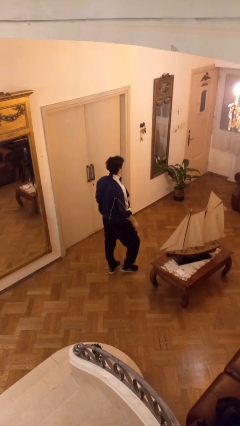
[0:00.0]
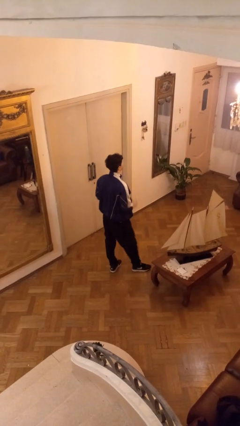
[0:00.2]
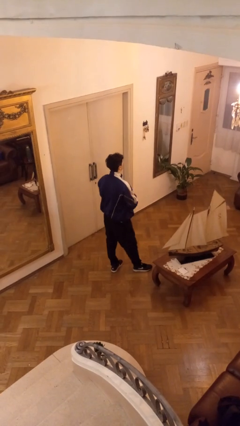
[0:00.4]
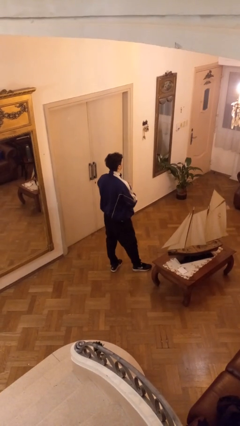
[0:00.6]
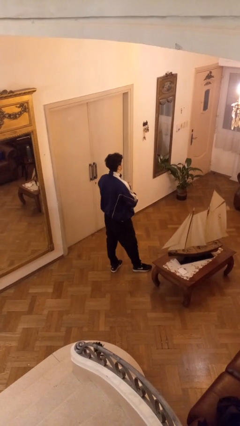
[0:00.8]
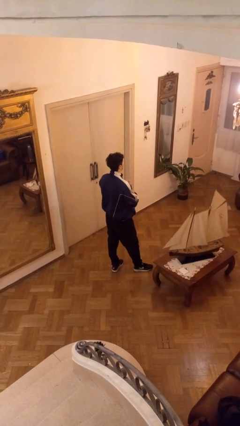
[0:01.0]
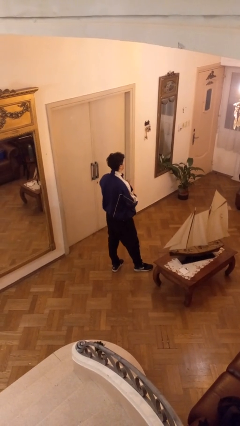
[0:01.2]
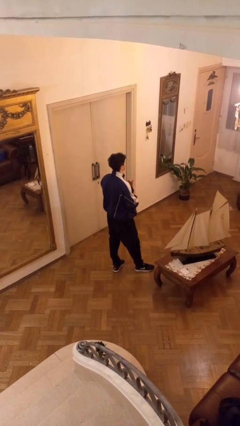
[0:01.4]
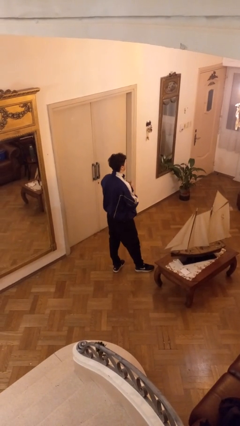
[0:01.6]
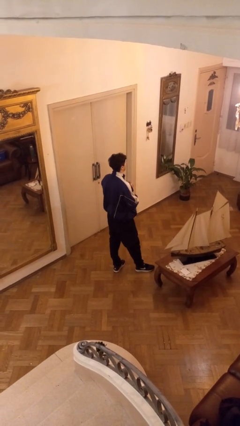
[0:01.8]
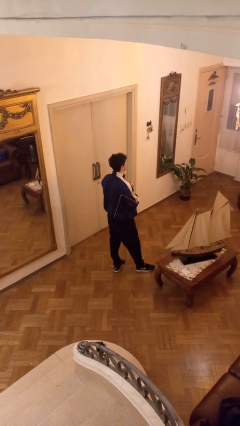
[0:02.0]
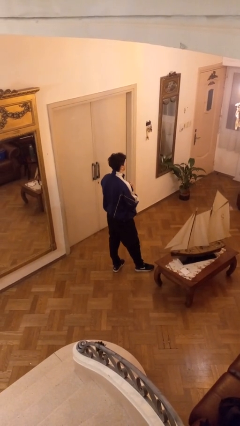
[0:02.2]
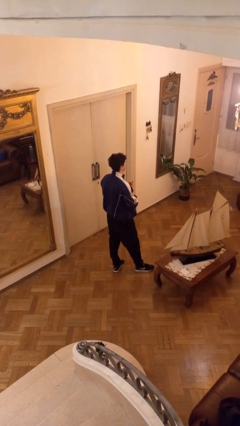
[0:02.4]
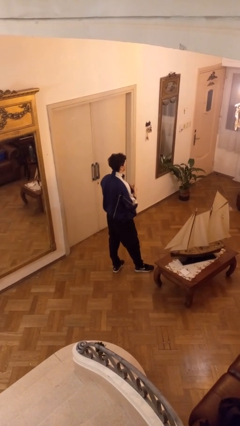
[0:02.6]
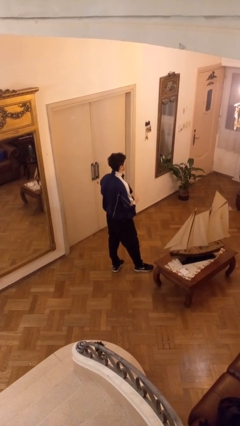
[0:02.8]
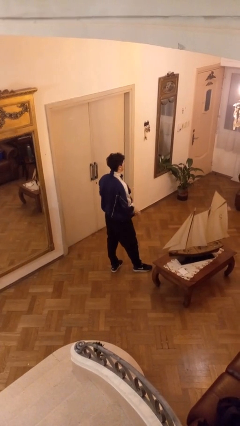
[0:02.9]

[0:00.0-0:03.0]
person cracks knuckles

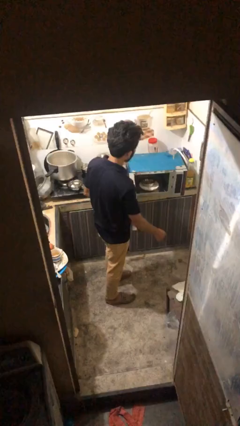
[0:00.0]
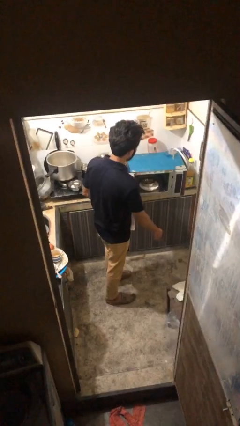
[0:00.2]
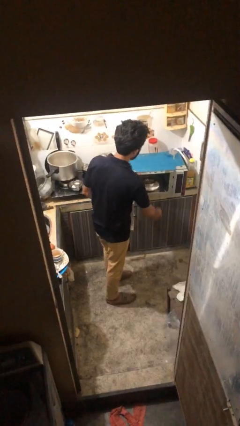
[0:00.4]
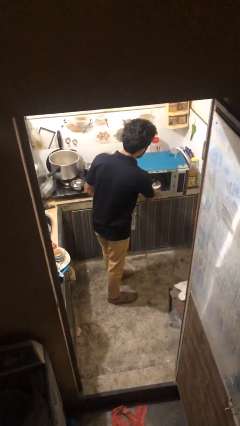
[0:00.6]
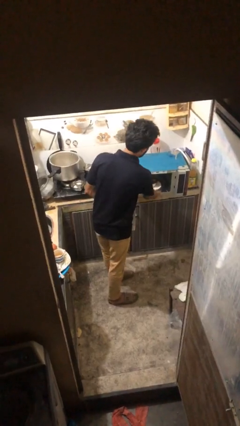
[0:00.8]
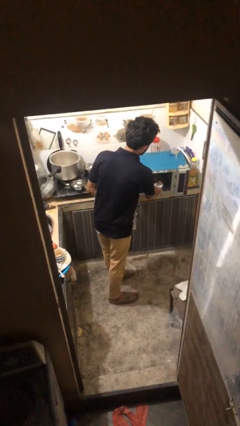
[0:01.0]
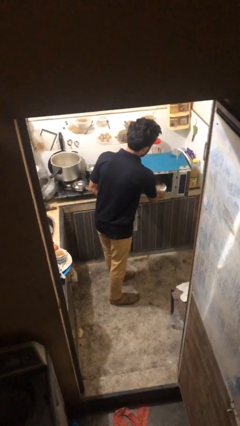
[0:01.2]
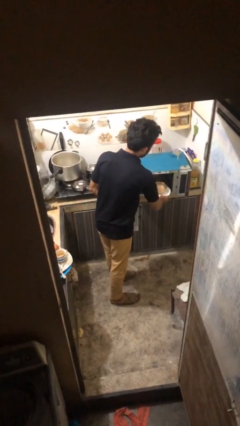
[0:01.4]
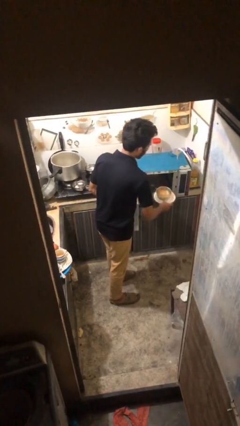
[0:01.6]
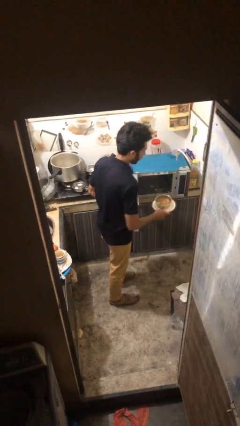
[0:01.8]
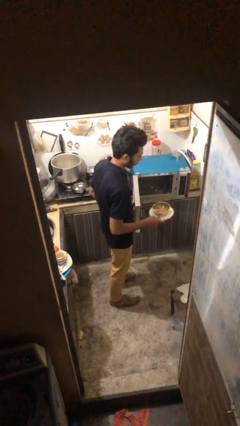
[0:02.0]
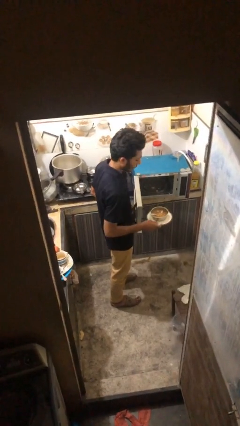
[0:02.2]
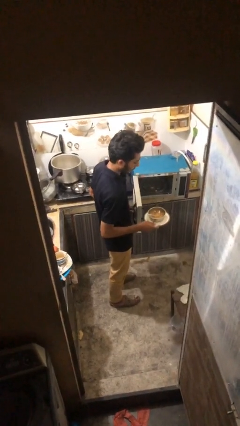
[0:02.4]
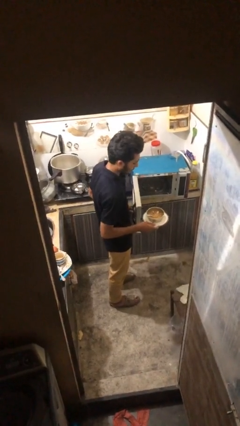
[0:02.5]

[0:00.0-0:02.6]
person takes object from microwave

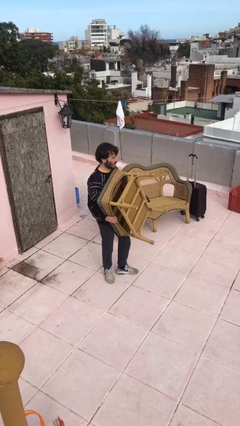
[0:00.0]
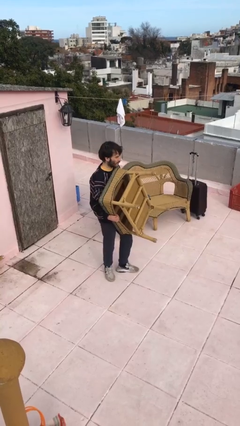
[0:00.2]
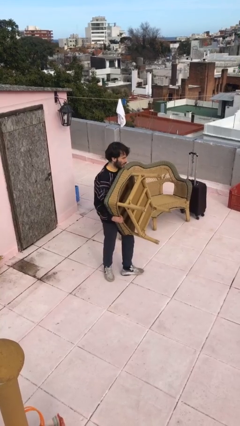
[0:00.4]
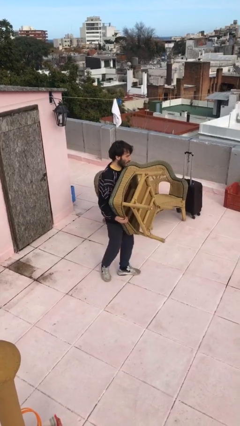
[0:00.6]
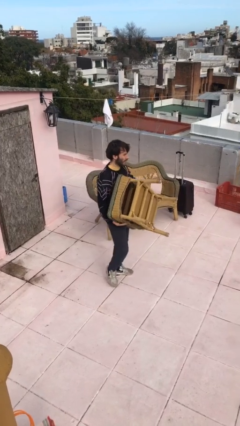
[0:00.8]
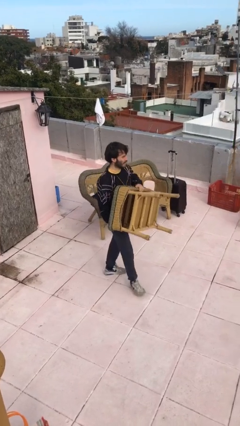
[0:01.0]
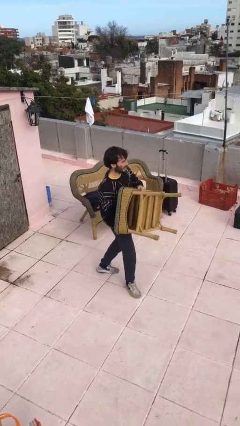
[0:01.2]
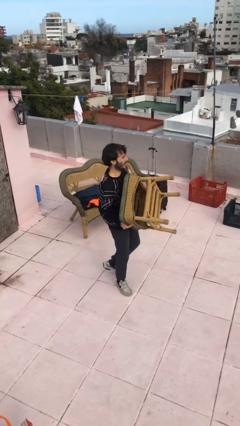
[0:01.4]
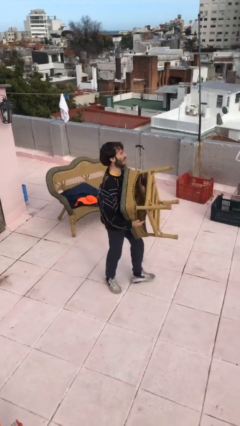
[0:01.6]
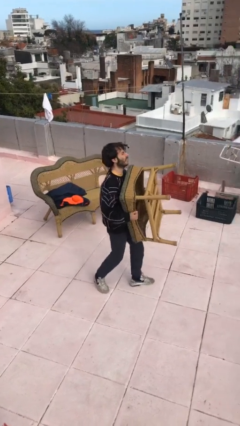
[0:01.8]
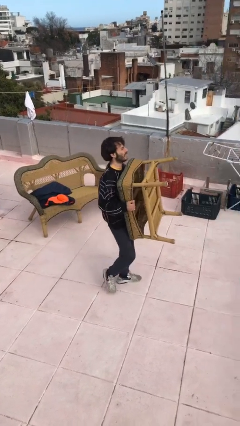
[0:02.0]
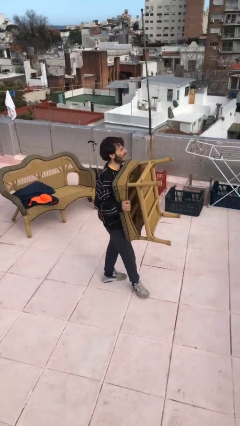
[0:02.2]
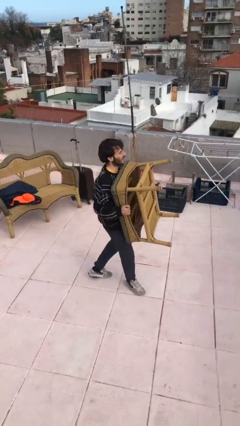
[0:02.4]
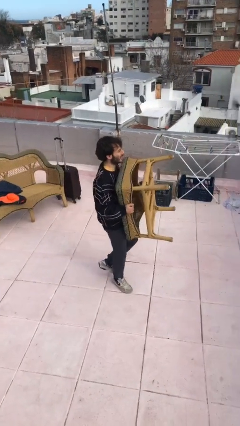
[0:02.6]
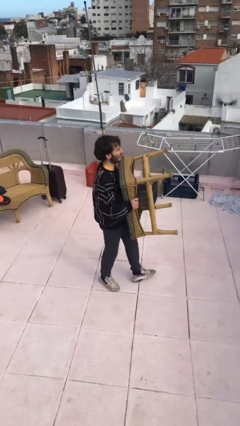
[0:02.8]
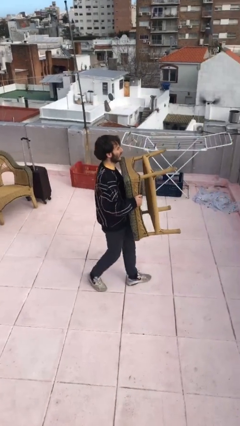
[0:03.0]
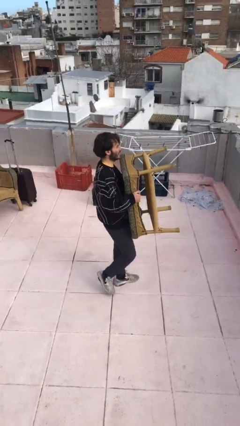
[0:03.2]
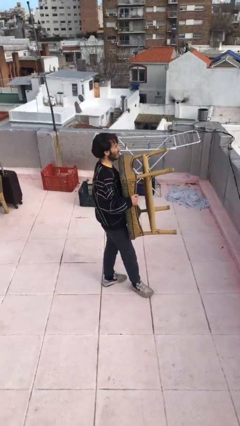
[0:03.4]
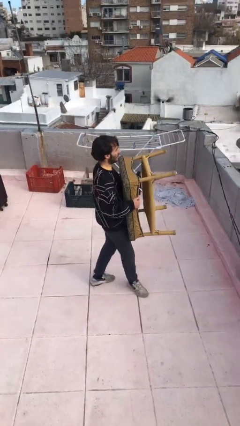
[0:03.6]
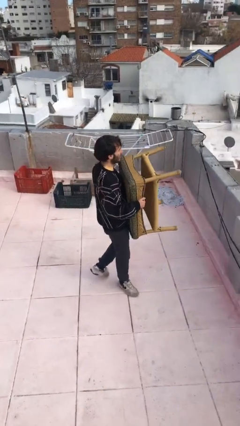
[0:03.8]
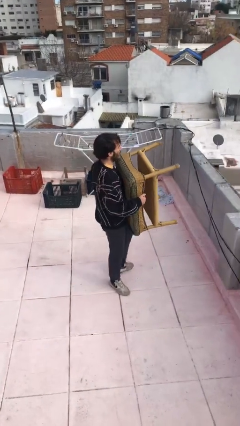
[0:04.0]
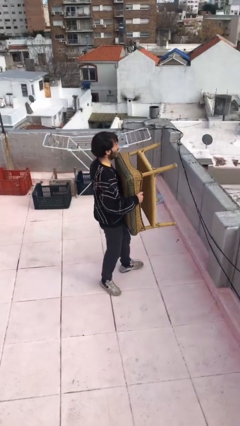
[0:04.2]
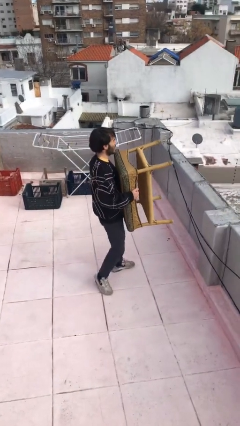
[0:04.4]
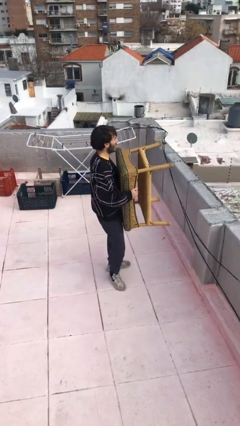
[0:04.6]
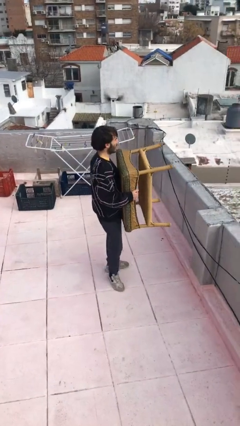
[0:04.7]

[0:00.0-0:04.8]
person carries furniture

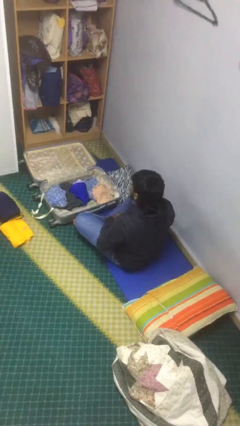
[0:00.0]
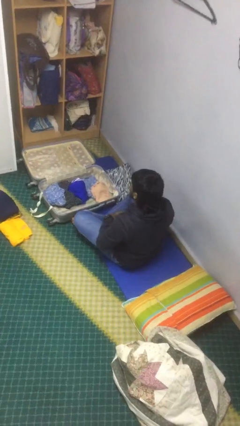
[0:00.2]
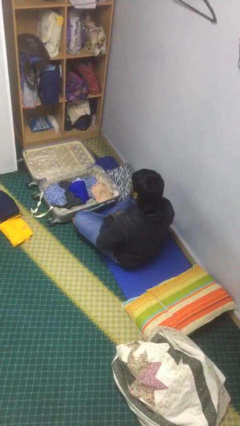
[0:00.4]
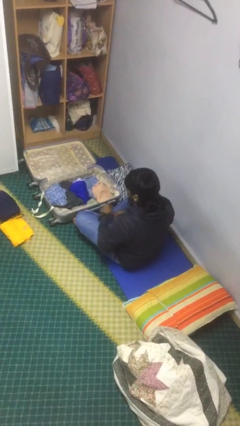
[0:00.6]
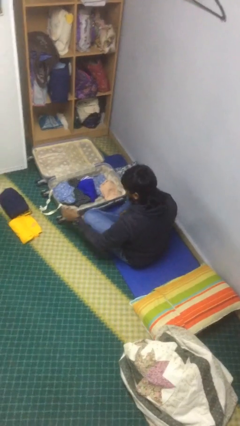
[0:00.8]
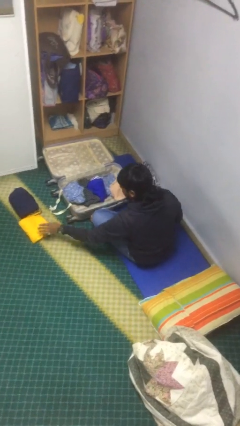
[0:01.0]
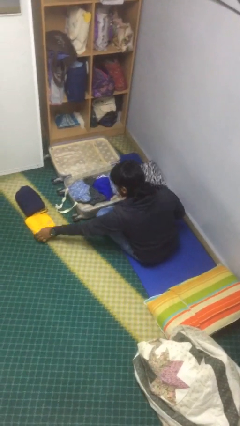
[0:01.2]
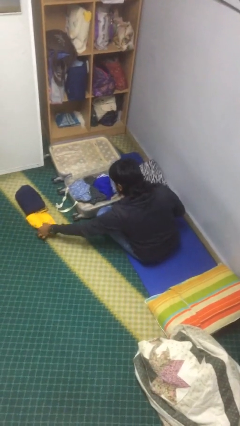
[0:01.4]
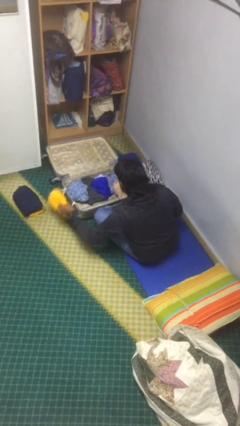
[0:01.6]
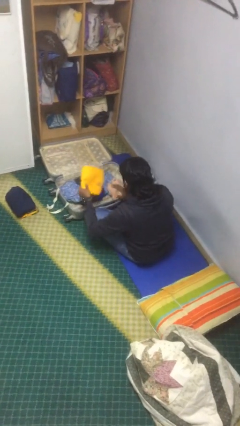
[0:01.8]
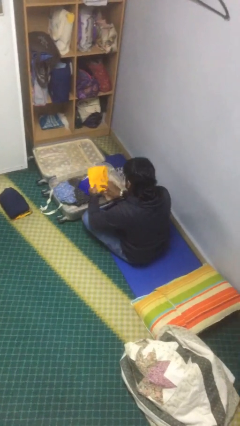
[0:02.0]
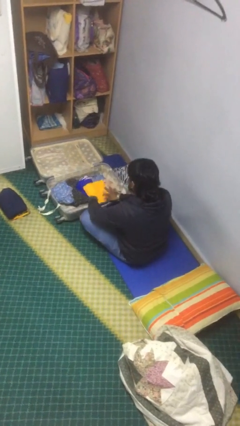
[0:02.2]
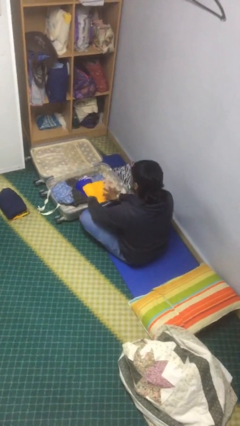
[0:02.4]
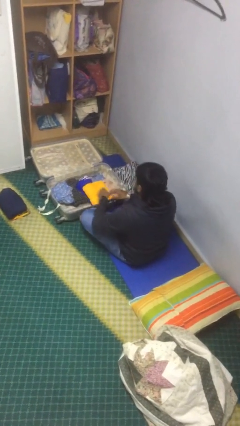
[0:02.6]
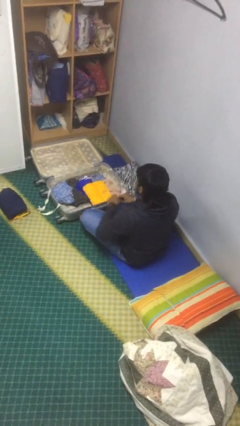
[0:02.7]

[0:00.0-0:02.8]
person loads clothes into suitcase

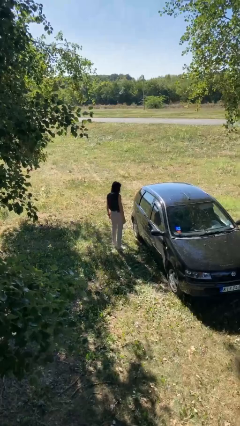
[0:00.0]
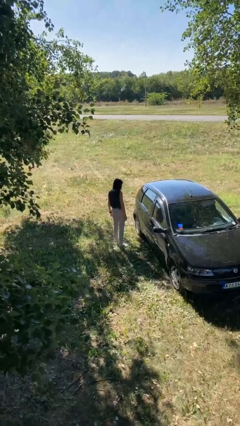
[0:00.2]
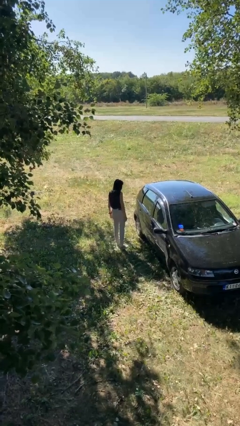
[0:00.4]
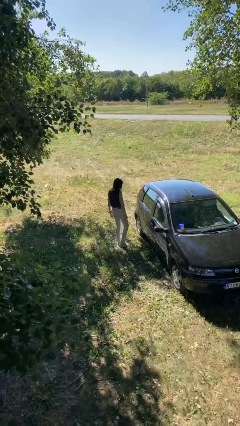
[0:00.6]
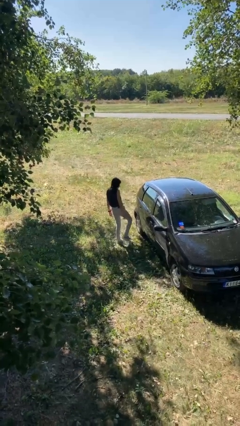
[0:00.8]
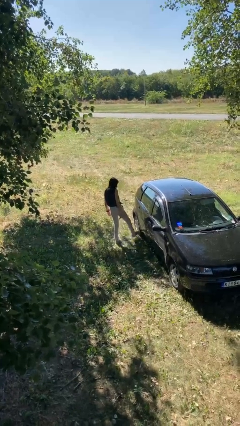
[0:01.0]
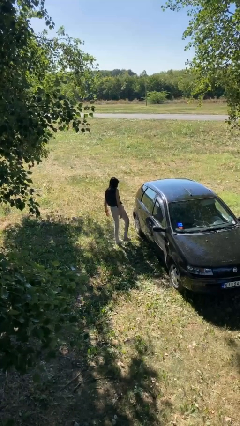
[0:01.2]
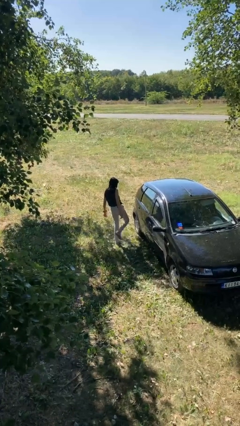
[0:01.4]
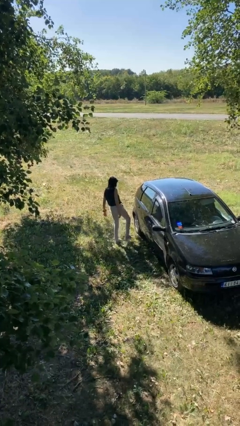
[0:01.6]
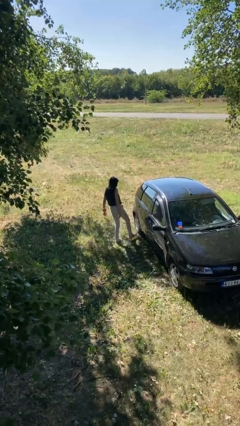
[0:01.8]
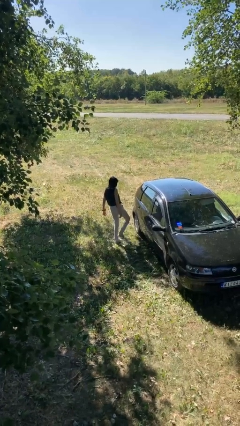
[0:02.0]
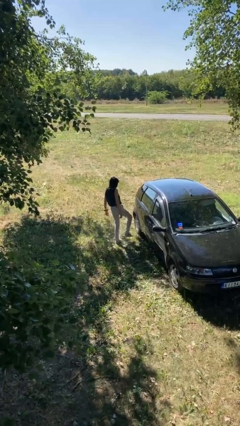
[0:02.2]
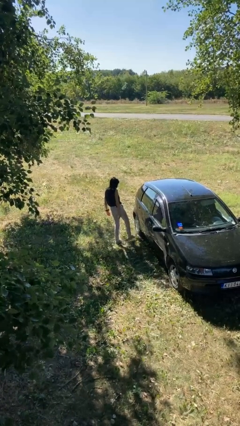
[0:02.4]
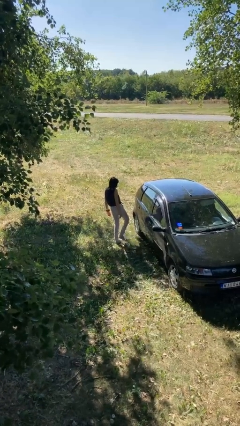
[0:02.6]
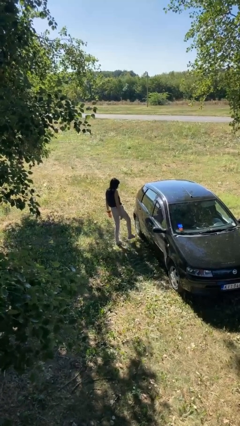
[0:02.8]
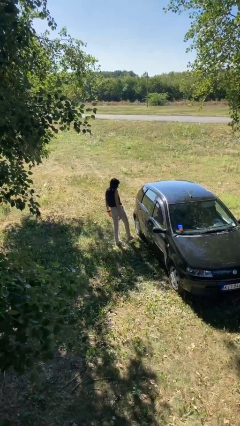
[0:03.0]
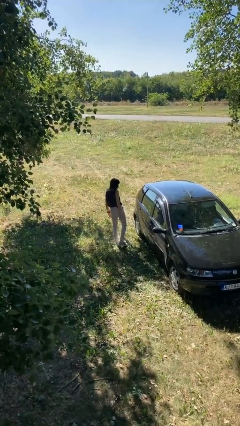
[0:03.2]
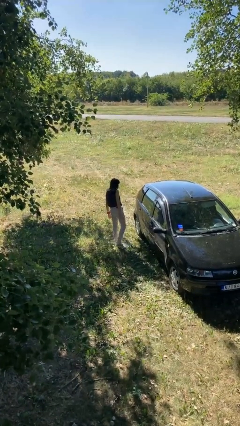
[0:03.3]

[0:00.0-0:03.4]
person kicks car tires

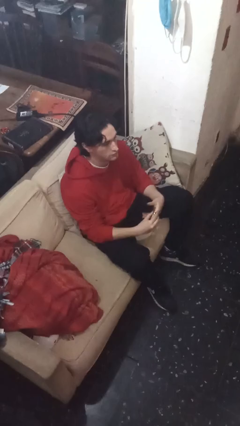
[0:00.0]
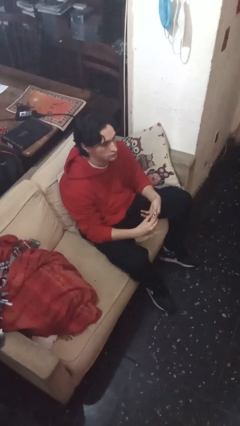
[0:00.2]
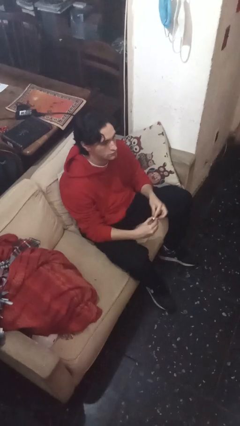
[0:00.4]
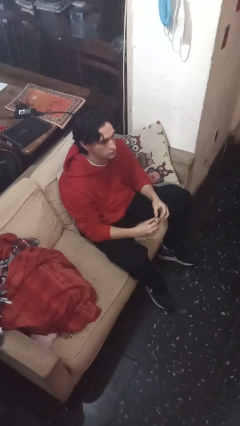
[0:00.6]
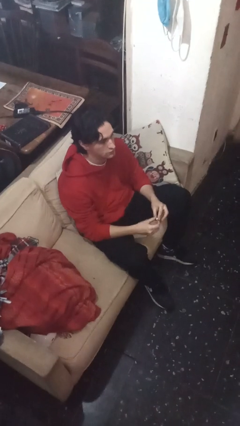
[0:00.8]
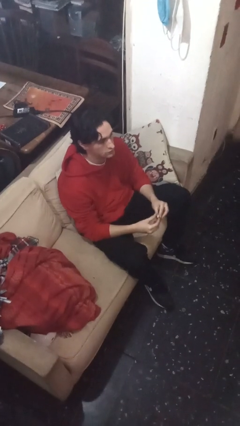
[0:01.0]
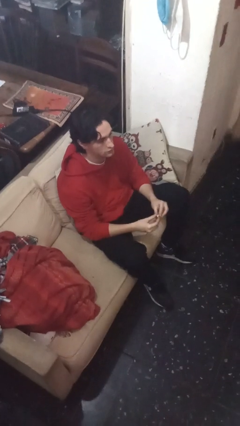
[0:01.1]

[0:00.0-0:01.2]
person takes off ring
